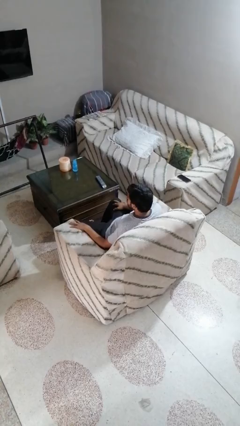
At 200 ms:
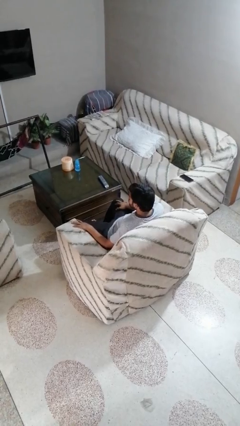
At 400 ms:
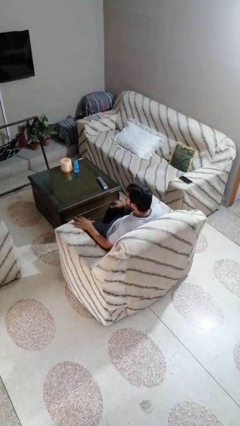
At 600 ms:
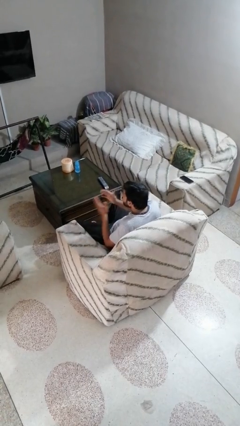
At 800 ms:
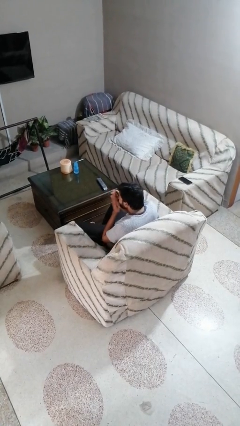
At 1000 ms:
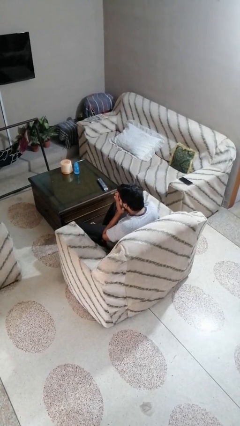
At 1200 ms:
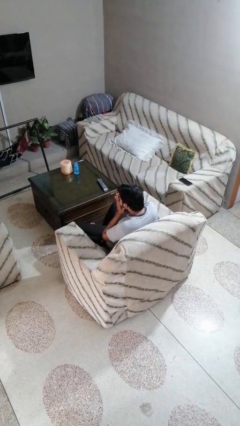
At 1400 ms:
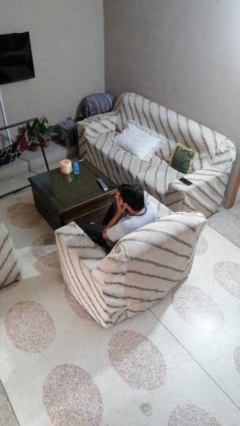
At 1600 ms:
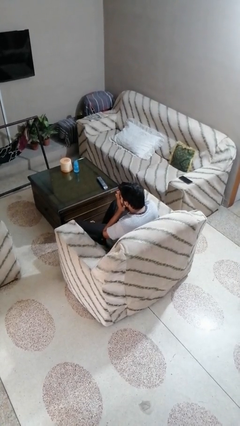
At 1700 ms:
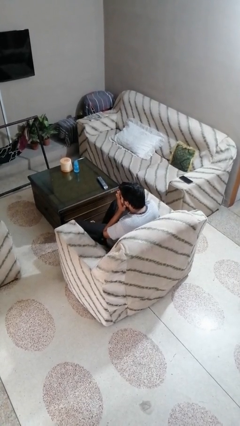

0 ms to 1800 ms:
person covers face with hands

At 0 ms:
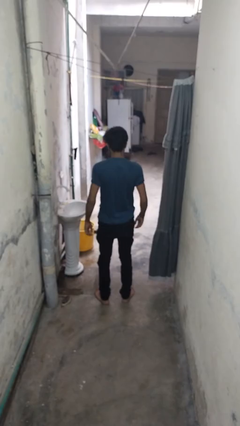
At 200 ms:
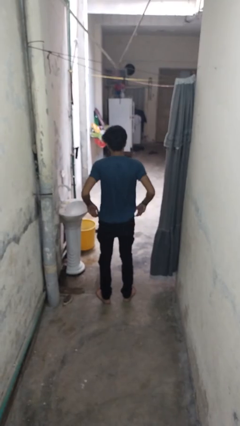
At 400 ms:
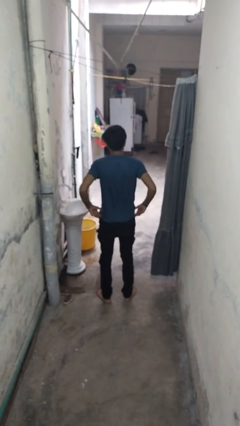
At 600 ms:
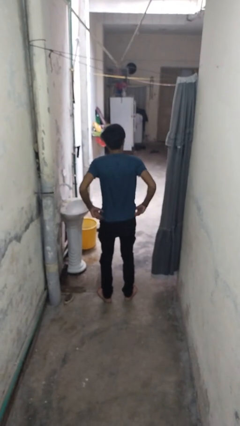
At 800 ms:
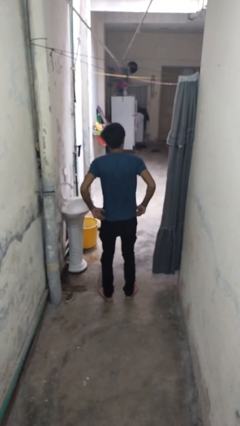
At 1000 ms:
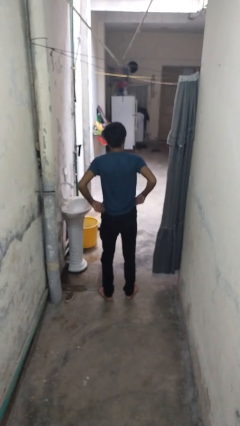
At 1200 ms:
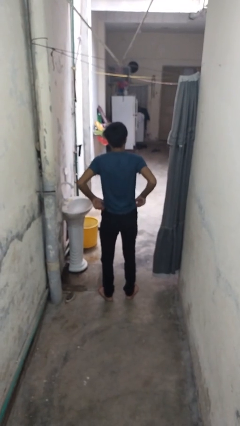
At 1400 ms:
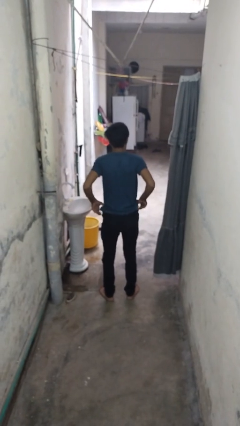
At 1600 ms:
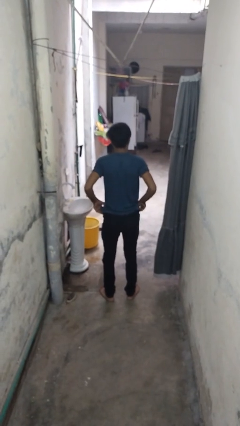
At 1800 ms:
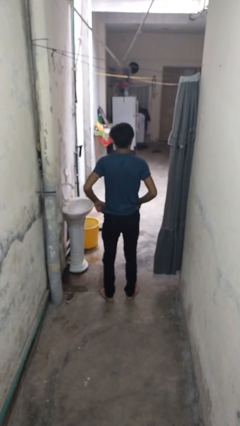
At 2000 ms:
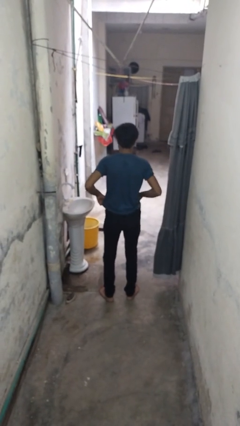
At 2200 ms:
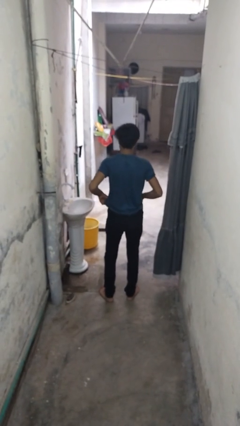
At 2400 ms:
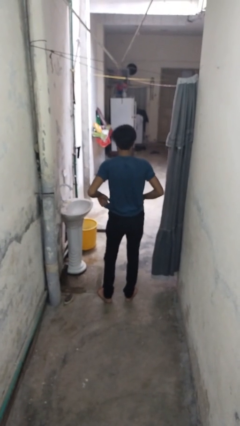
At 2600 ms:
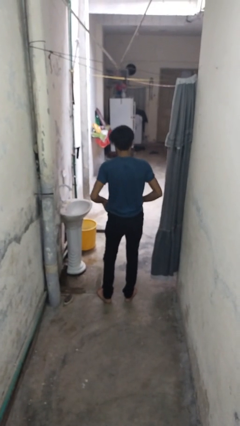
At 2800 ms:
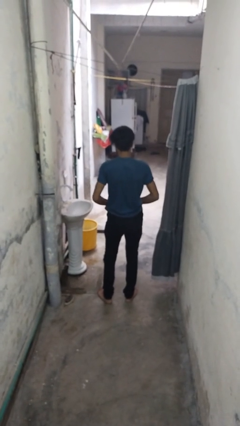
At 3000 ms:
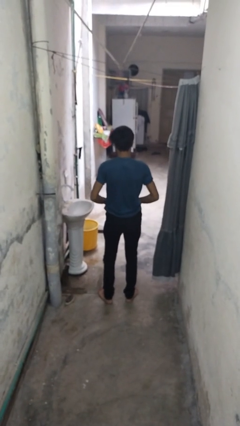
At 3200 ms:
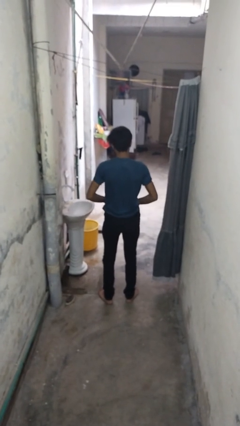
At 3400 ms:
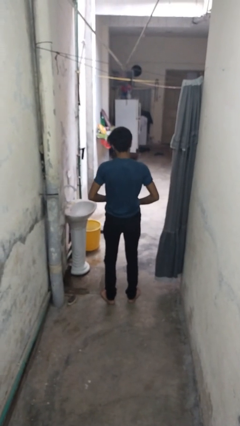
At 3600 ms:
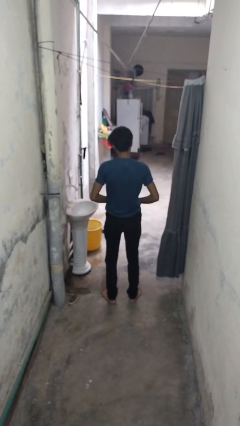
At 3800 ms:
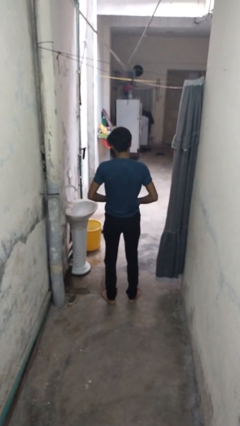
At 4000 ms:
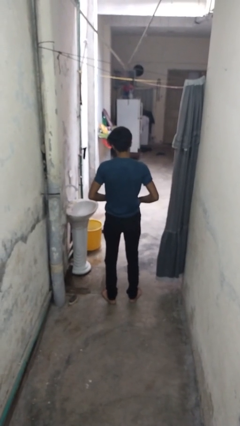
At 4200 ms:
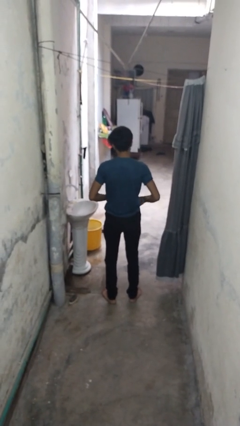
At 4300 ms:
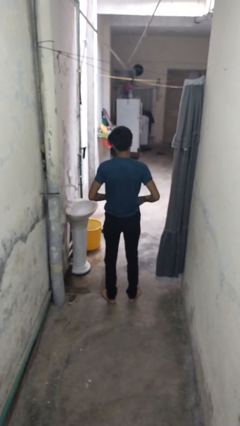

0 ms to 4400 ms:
person hikes up pants

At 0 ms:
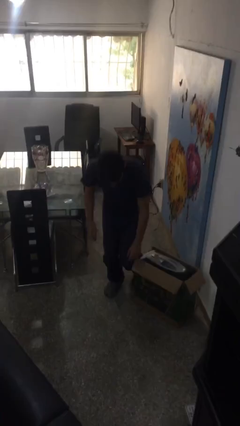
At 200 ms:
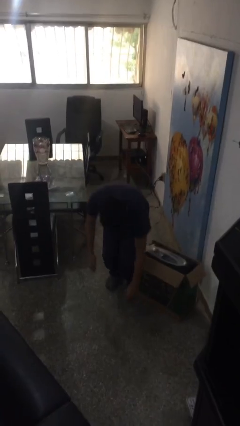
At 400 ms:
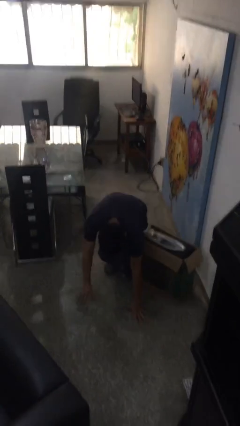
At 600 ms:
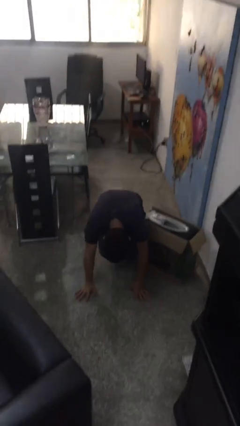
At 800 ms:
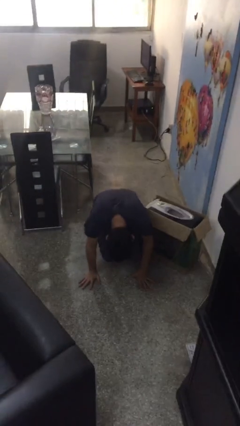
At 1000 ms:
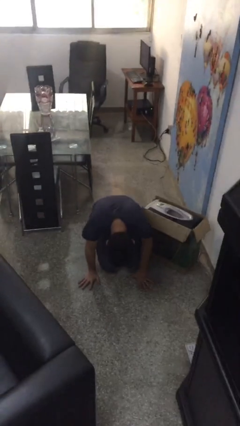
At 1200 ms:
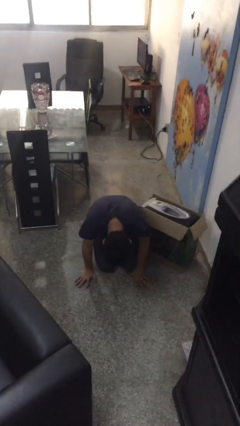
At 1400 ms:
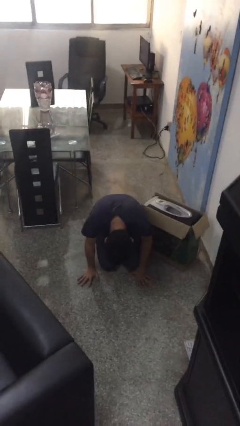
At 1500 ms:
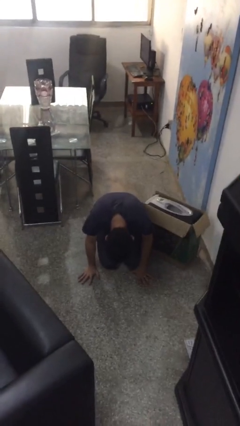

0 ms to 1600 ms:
person trips on object on floor

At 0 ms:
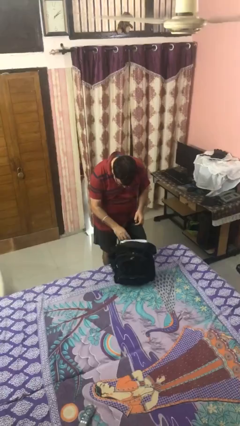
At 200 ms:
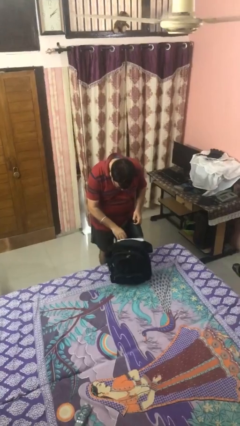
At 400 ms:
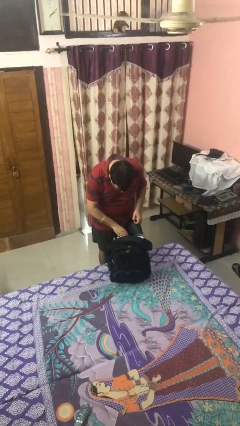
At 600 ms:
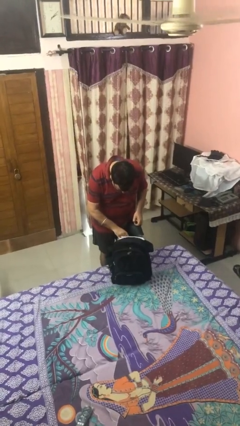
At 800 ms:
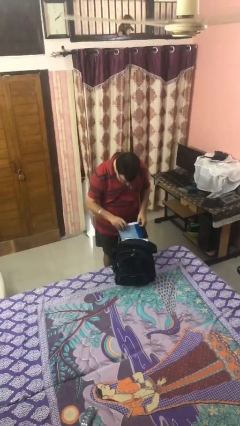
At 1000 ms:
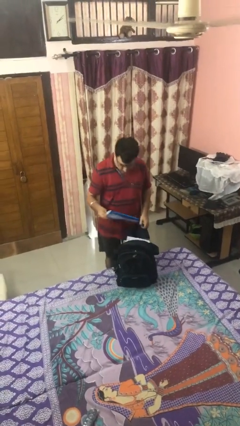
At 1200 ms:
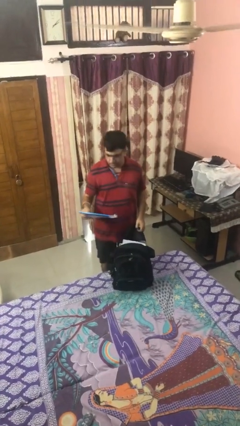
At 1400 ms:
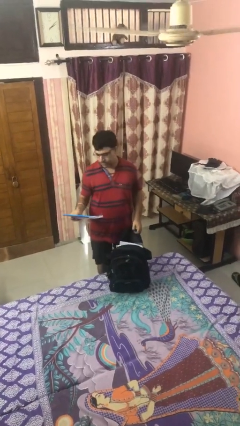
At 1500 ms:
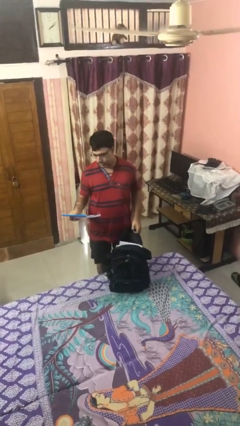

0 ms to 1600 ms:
person takes object from backpack

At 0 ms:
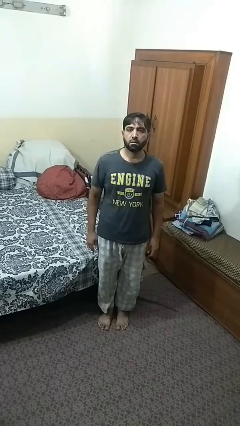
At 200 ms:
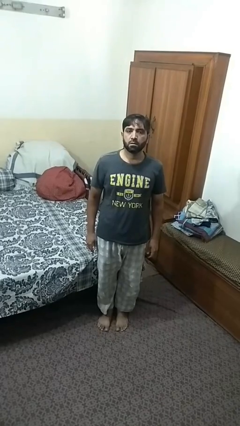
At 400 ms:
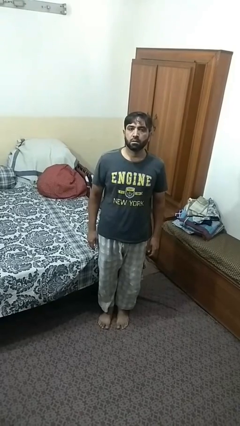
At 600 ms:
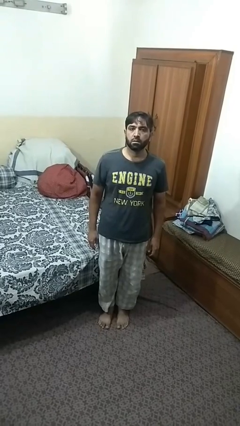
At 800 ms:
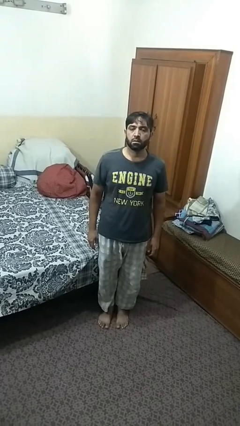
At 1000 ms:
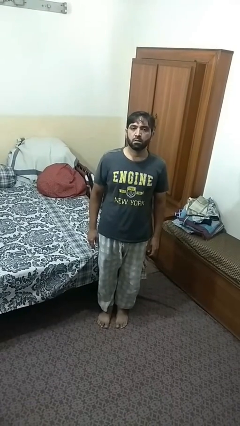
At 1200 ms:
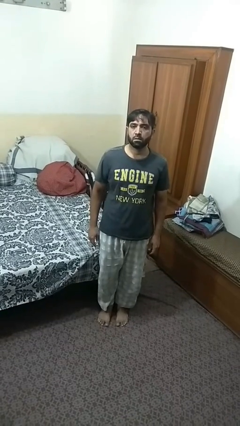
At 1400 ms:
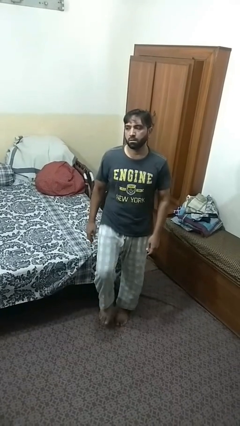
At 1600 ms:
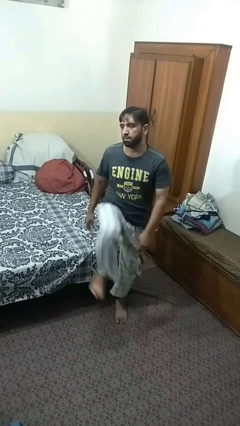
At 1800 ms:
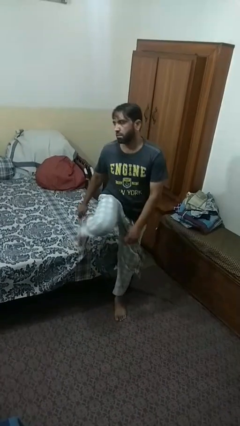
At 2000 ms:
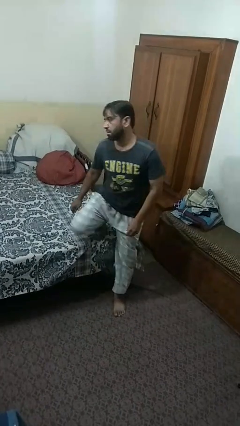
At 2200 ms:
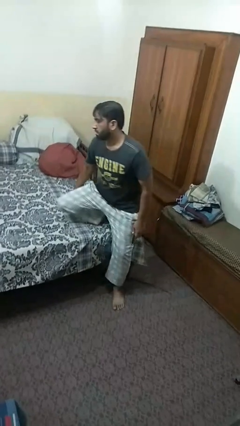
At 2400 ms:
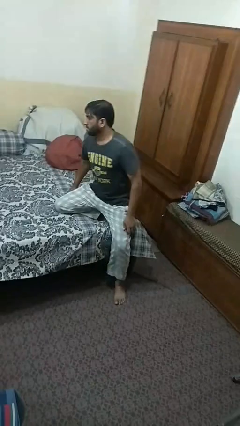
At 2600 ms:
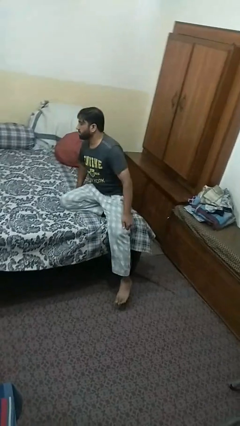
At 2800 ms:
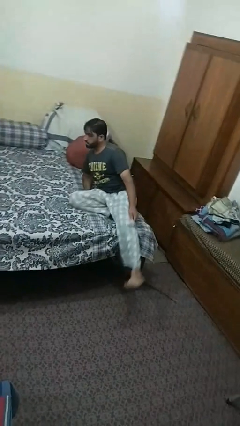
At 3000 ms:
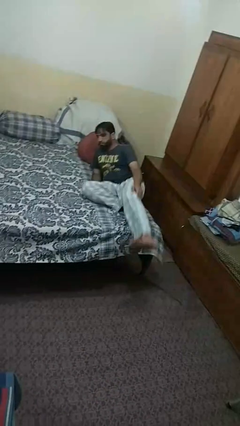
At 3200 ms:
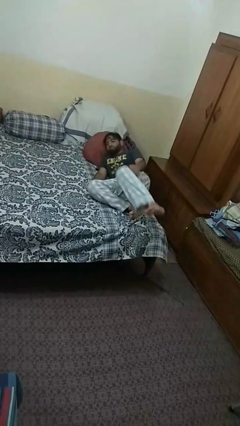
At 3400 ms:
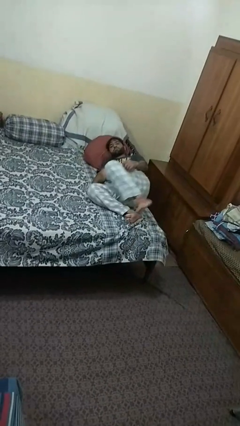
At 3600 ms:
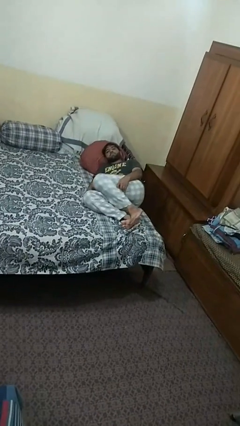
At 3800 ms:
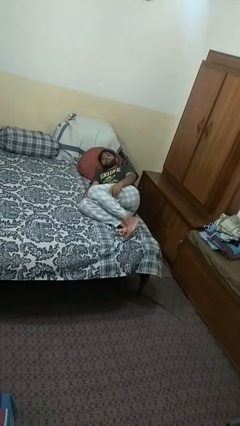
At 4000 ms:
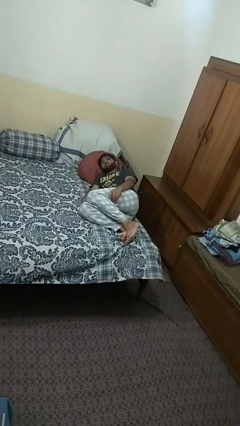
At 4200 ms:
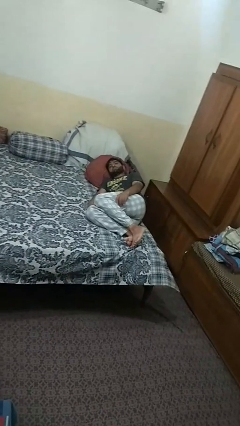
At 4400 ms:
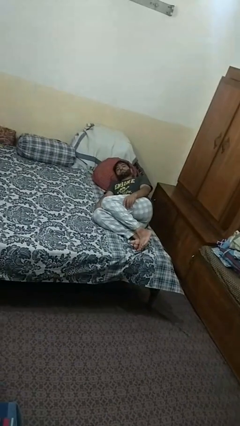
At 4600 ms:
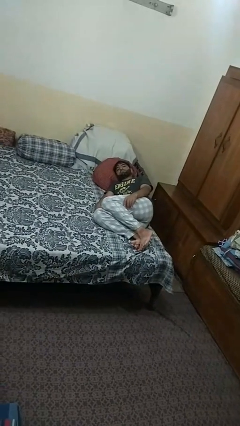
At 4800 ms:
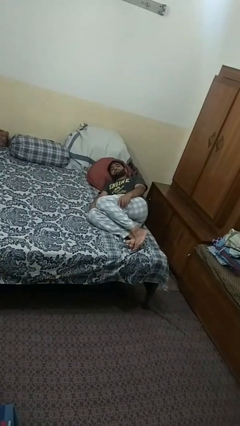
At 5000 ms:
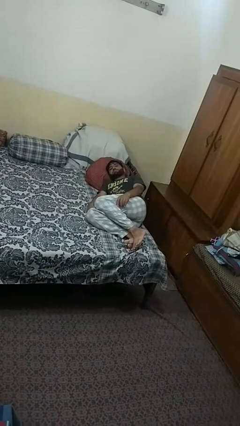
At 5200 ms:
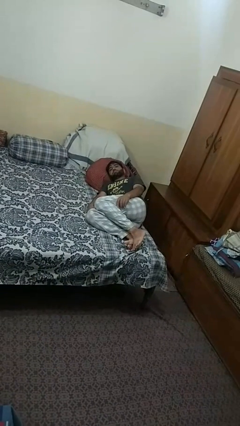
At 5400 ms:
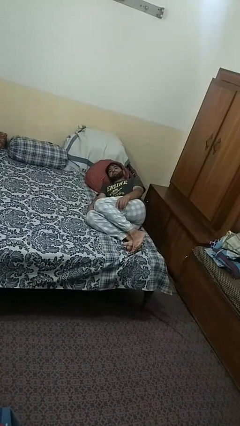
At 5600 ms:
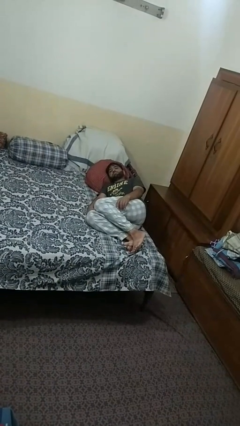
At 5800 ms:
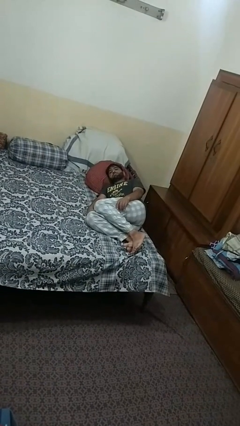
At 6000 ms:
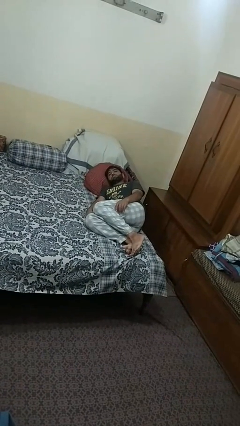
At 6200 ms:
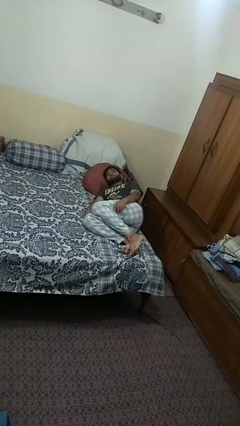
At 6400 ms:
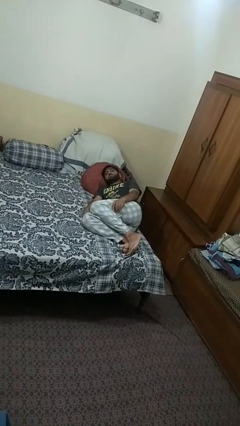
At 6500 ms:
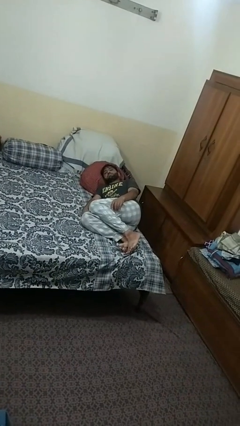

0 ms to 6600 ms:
person lies down on bed

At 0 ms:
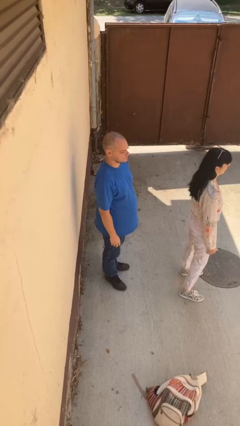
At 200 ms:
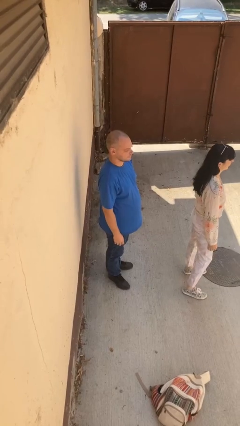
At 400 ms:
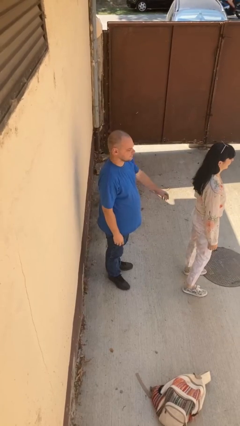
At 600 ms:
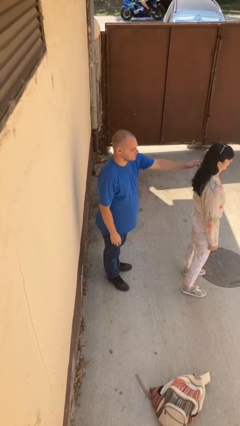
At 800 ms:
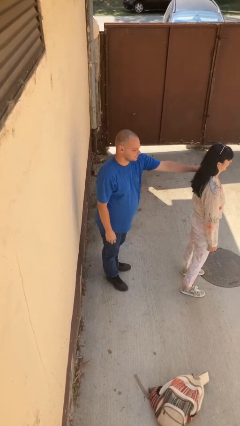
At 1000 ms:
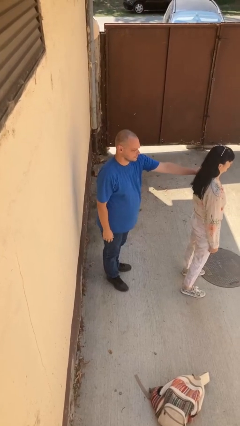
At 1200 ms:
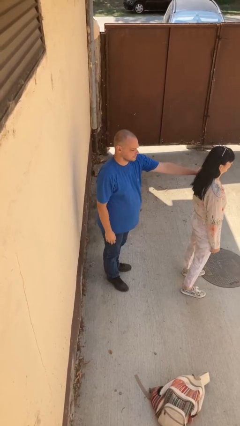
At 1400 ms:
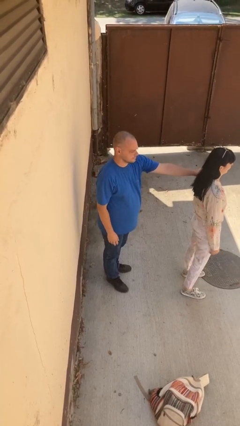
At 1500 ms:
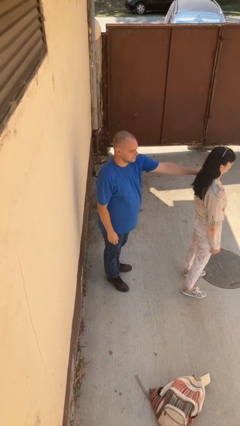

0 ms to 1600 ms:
person grabs person by shoulder
